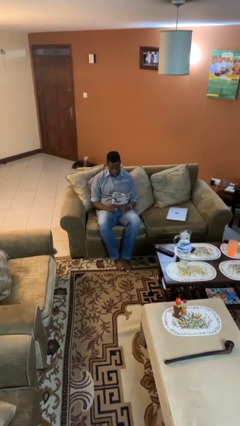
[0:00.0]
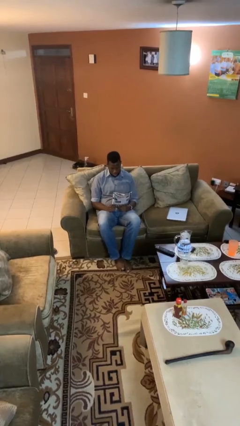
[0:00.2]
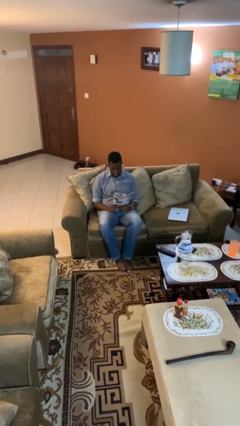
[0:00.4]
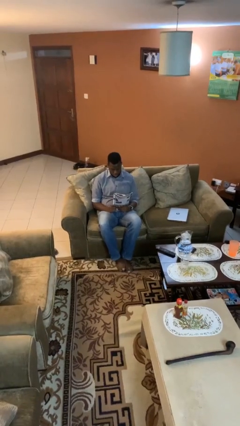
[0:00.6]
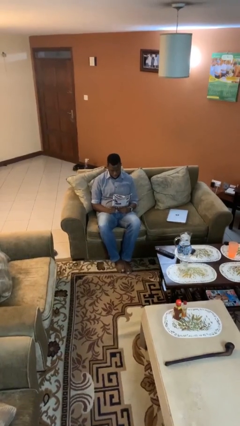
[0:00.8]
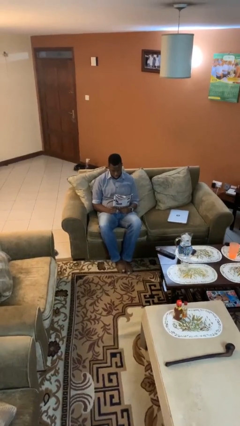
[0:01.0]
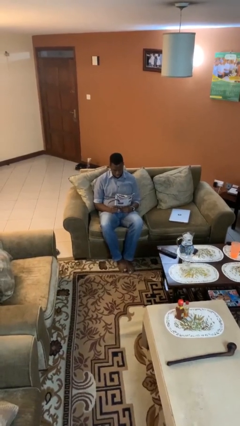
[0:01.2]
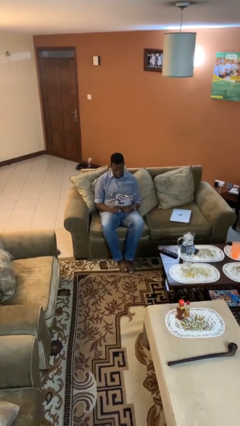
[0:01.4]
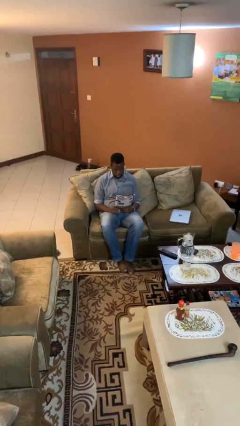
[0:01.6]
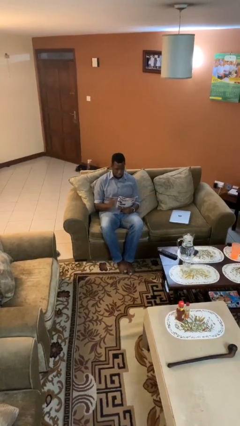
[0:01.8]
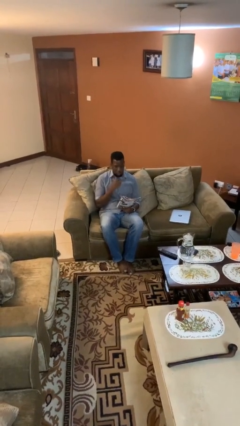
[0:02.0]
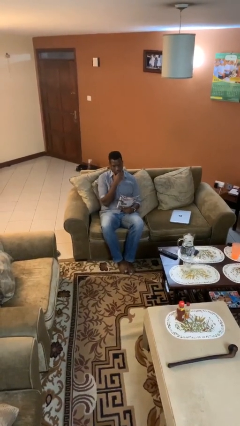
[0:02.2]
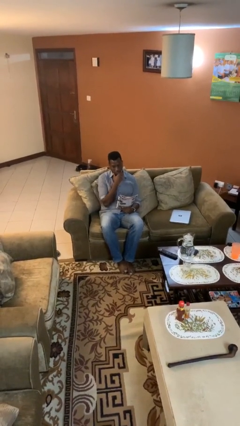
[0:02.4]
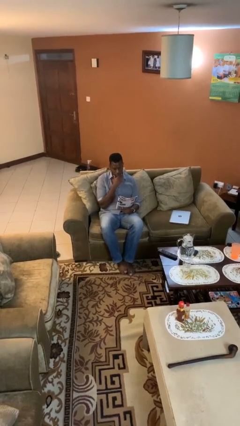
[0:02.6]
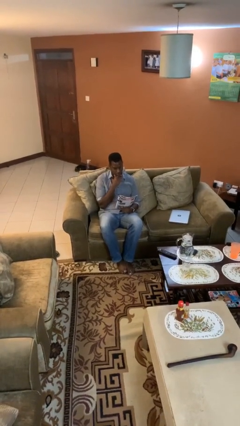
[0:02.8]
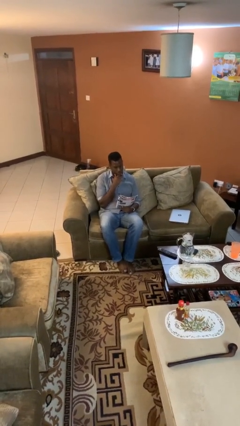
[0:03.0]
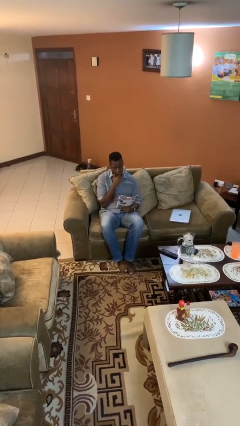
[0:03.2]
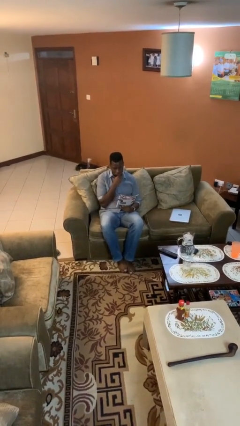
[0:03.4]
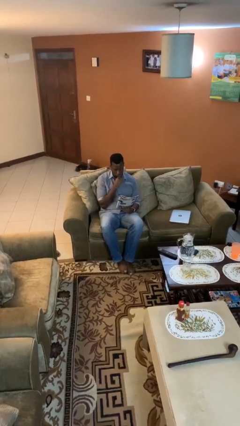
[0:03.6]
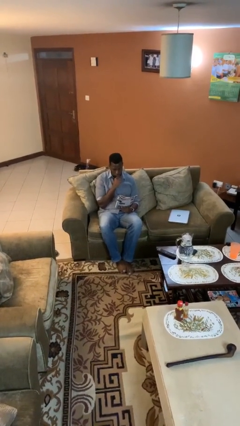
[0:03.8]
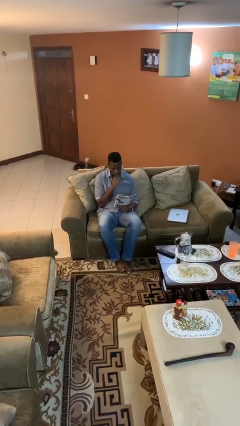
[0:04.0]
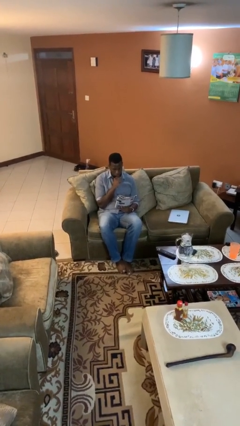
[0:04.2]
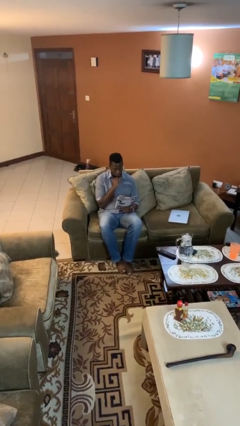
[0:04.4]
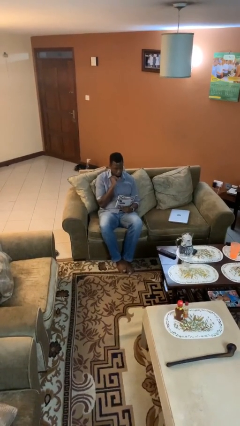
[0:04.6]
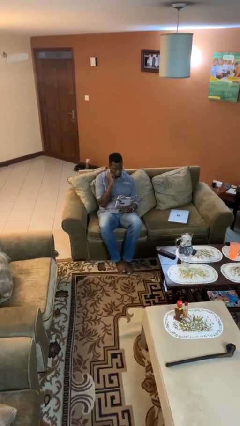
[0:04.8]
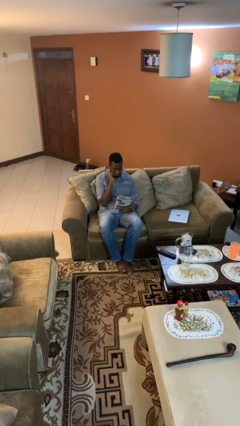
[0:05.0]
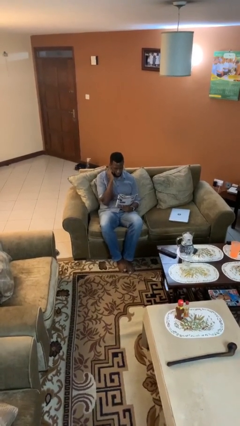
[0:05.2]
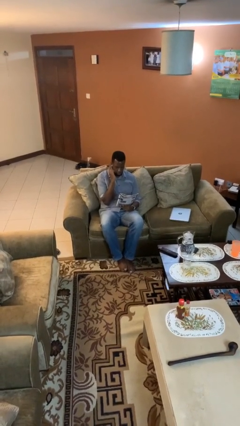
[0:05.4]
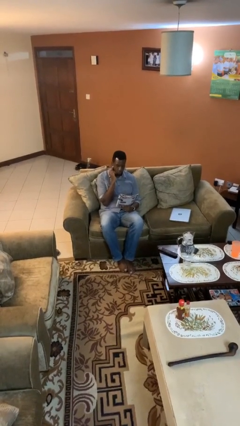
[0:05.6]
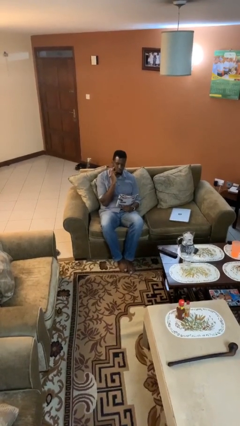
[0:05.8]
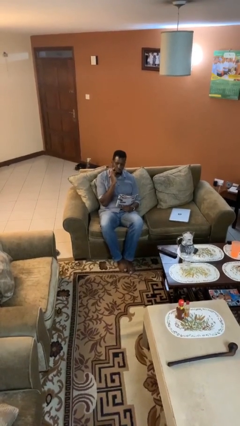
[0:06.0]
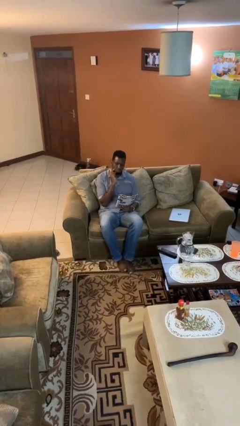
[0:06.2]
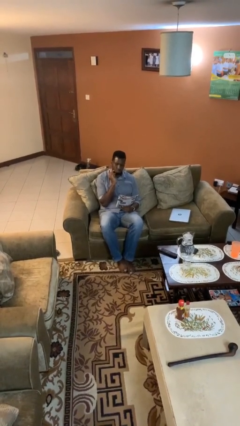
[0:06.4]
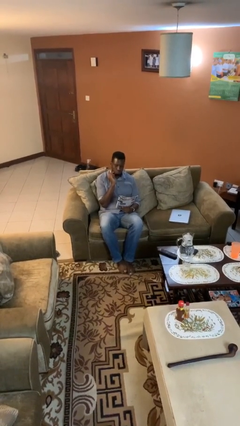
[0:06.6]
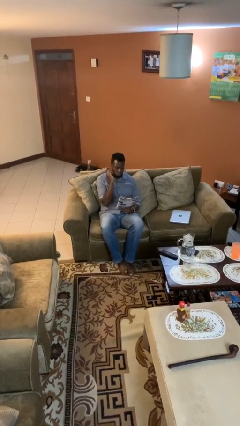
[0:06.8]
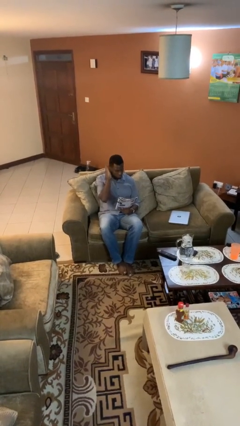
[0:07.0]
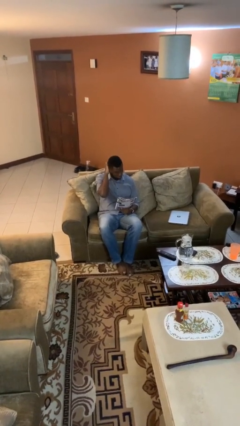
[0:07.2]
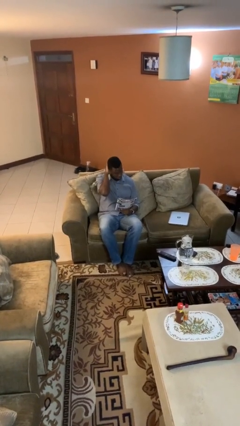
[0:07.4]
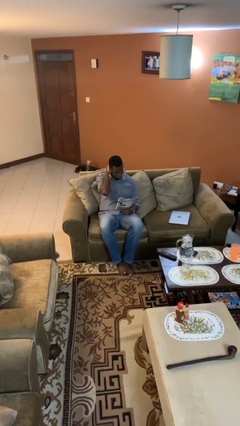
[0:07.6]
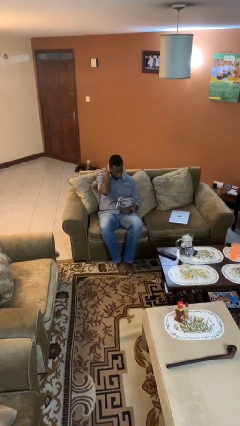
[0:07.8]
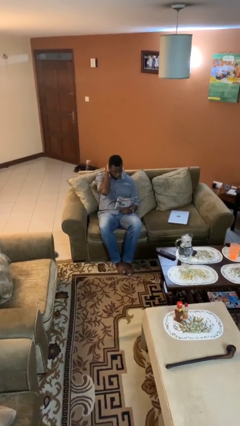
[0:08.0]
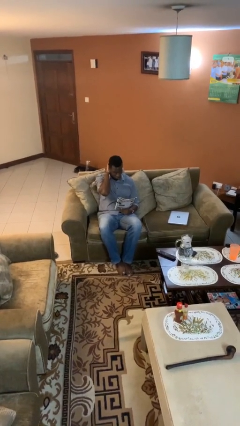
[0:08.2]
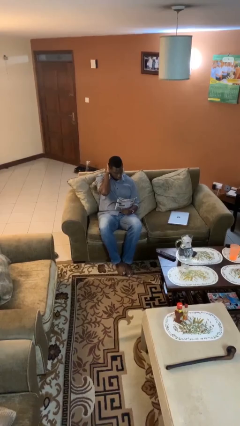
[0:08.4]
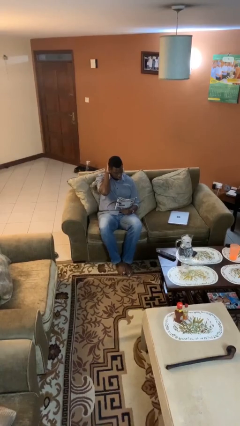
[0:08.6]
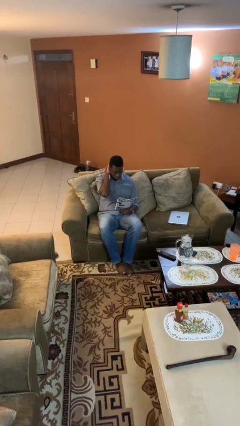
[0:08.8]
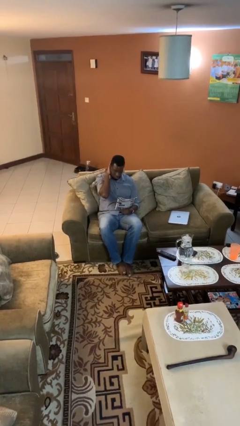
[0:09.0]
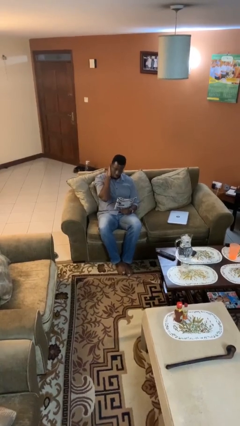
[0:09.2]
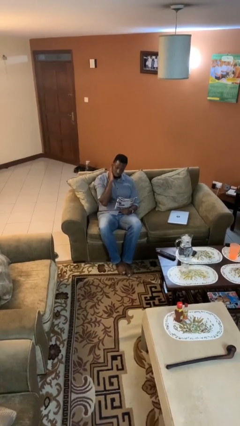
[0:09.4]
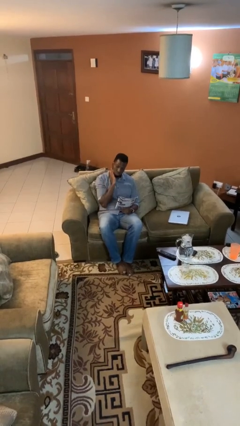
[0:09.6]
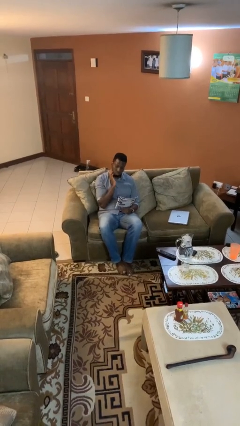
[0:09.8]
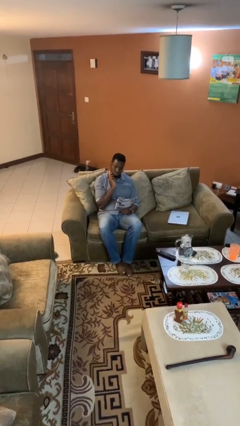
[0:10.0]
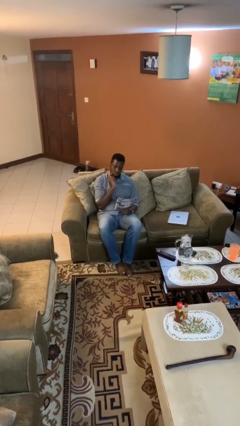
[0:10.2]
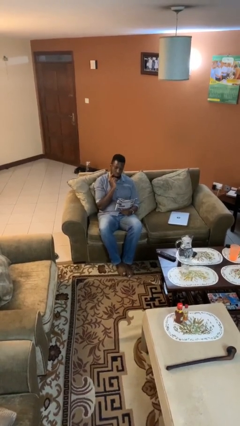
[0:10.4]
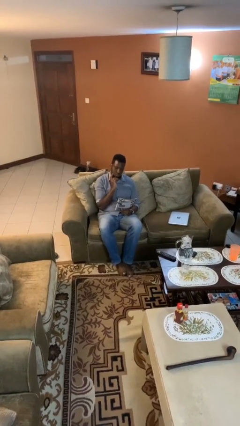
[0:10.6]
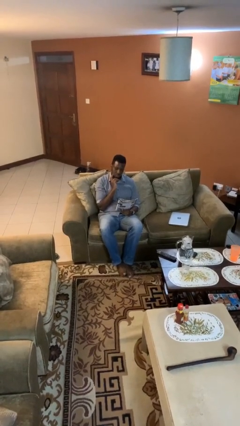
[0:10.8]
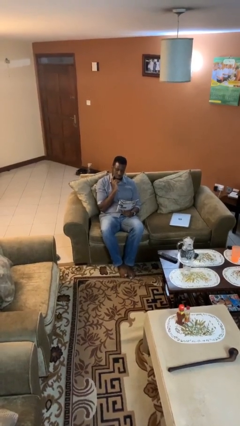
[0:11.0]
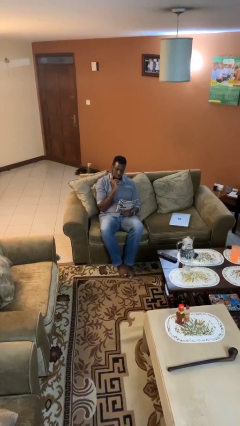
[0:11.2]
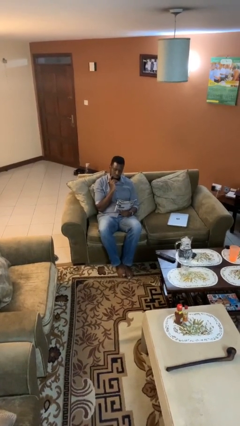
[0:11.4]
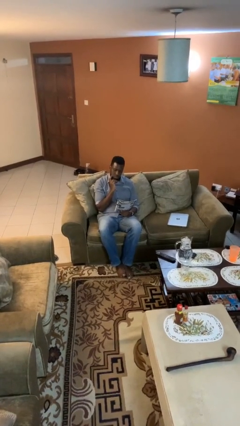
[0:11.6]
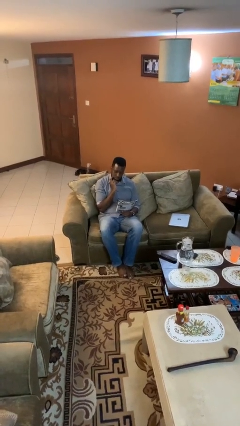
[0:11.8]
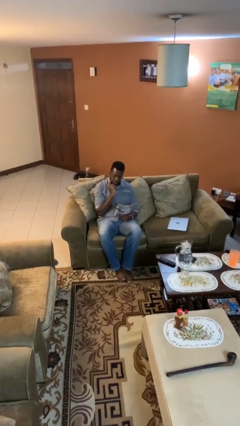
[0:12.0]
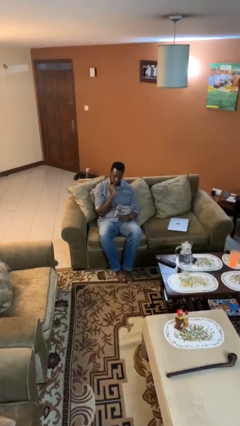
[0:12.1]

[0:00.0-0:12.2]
person reads document

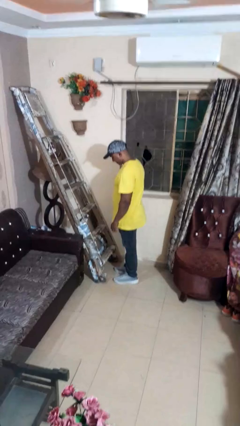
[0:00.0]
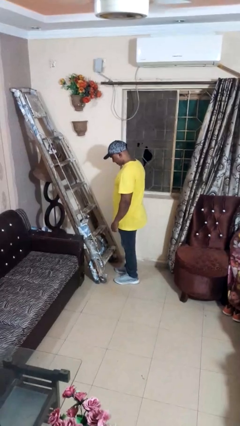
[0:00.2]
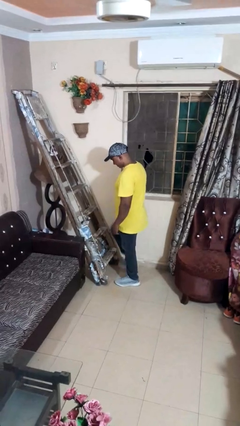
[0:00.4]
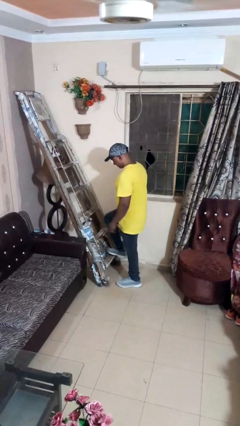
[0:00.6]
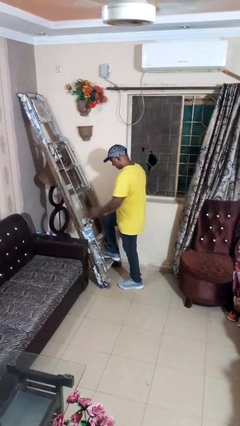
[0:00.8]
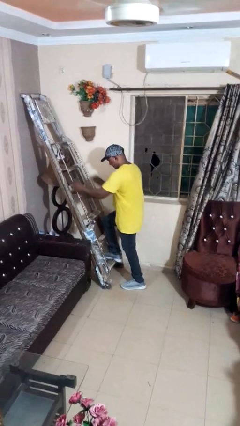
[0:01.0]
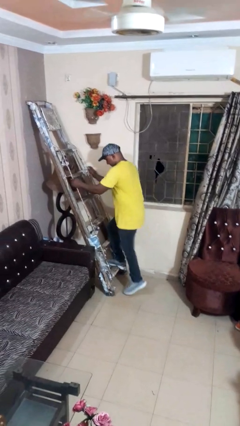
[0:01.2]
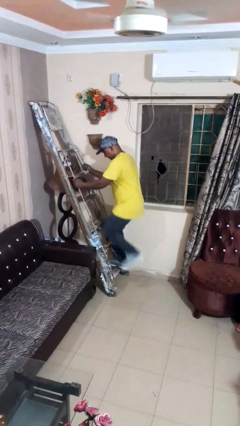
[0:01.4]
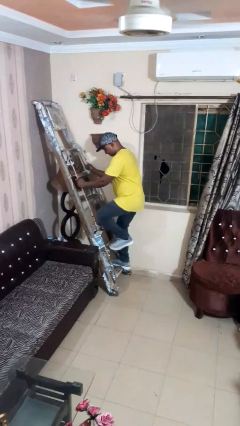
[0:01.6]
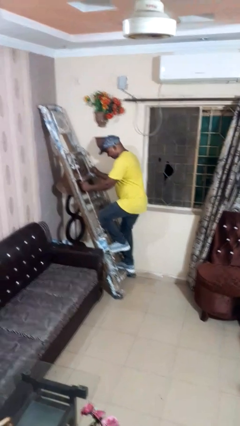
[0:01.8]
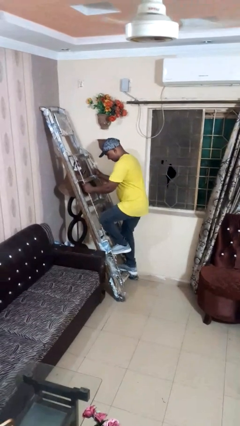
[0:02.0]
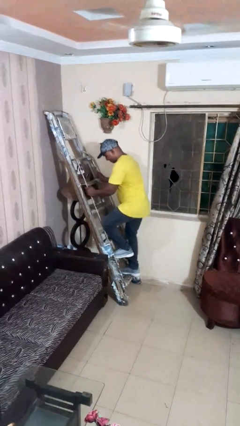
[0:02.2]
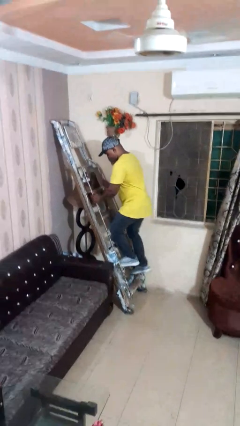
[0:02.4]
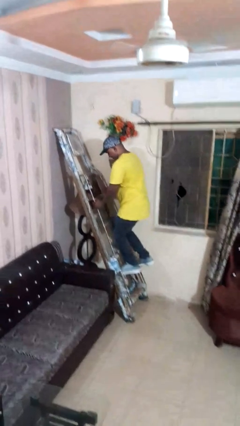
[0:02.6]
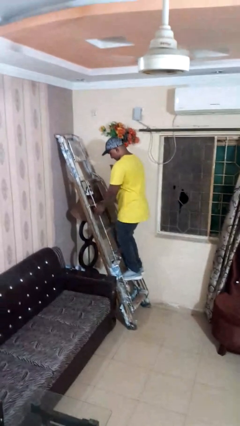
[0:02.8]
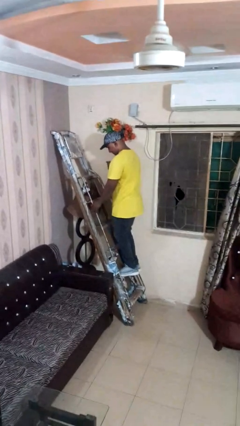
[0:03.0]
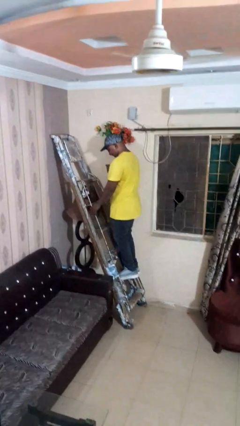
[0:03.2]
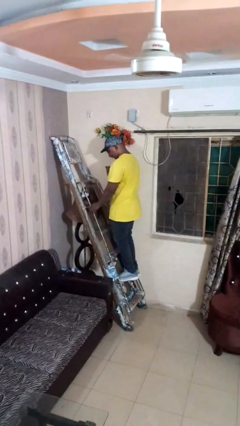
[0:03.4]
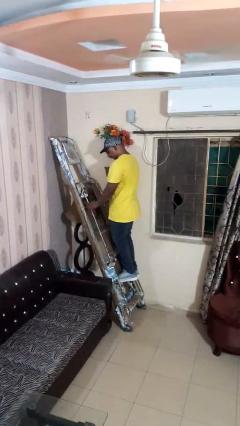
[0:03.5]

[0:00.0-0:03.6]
person climbs up ladder

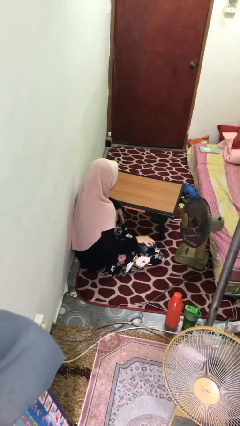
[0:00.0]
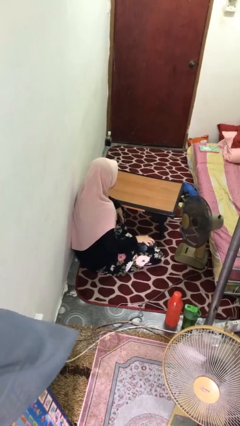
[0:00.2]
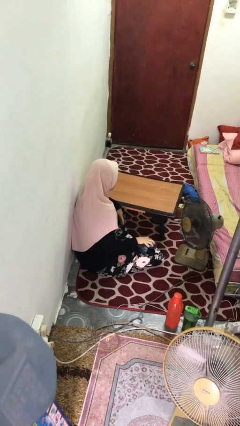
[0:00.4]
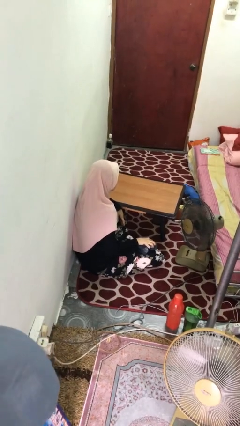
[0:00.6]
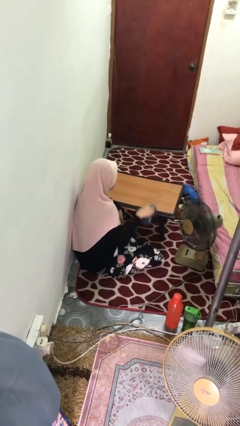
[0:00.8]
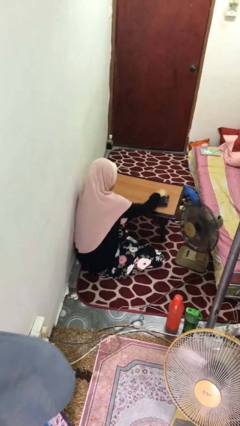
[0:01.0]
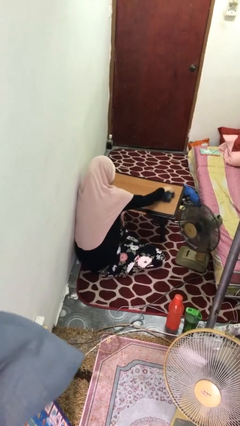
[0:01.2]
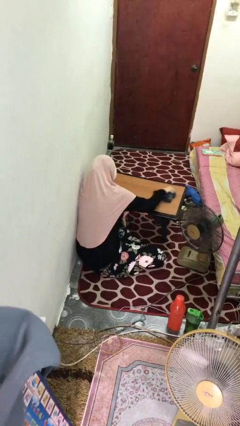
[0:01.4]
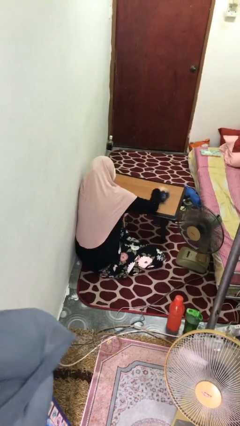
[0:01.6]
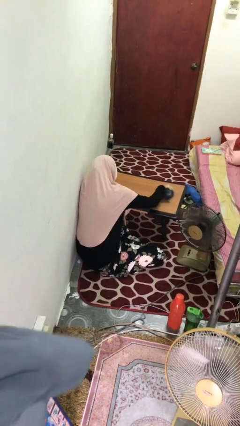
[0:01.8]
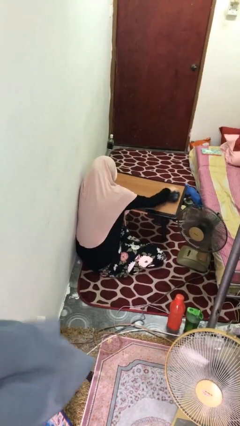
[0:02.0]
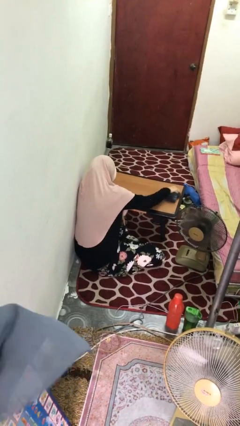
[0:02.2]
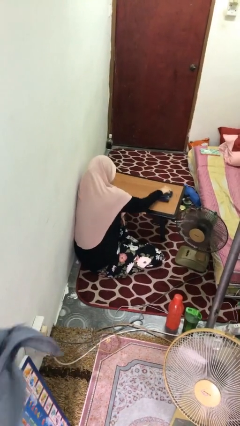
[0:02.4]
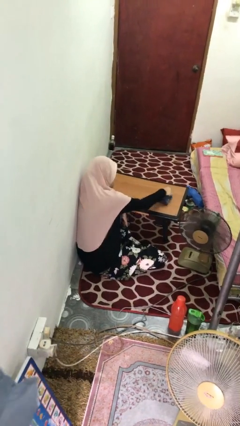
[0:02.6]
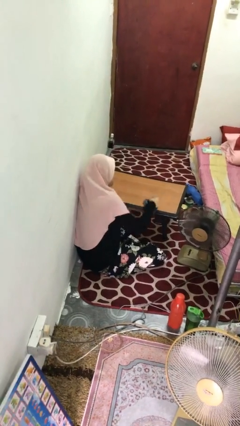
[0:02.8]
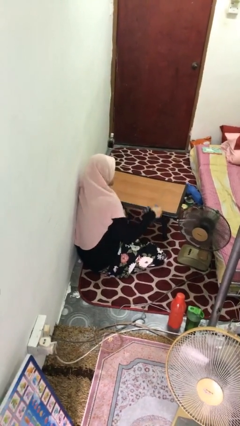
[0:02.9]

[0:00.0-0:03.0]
person cleans table with rag
